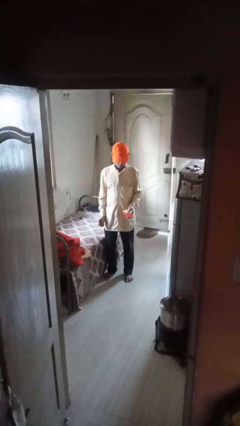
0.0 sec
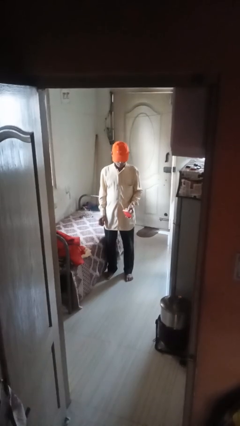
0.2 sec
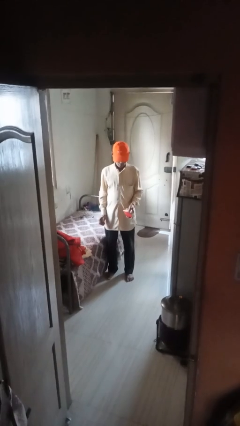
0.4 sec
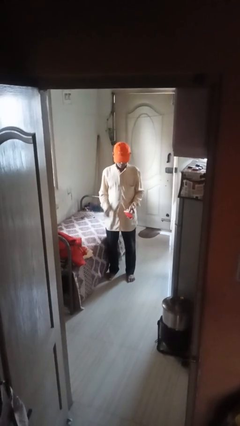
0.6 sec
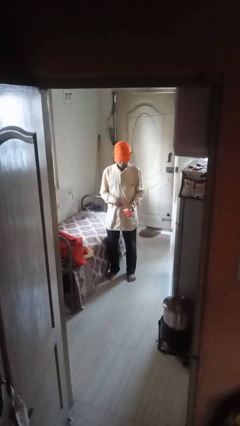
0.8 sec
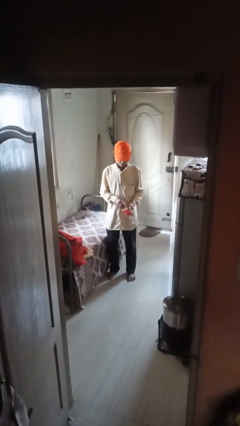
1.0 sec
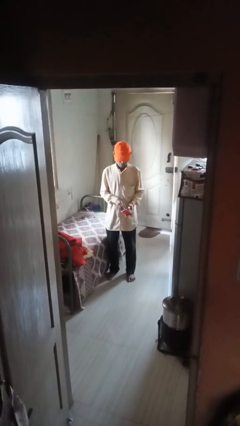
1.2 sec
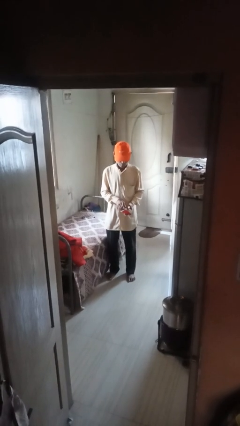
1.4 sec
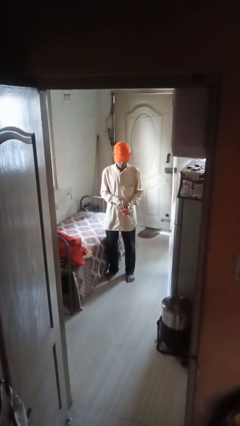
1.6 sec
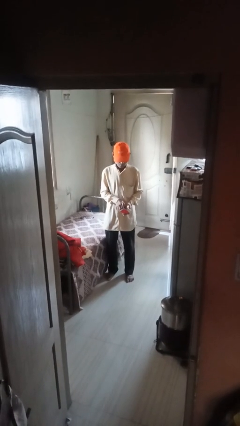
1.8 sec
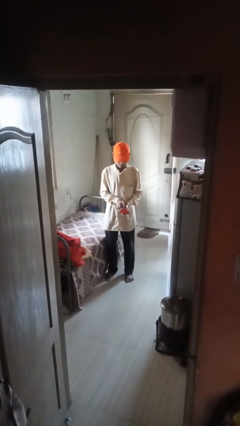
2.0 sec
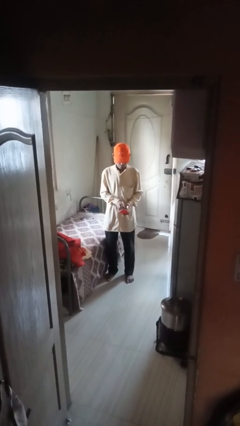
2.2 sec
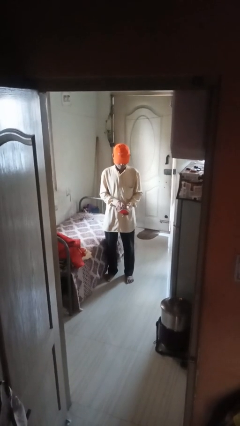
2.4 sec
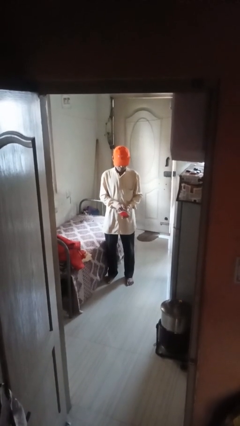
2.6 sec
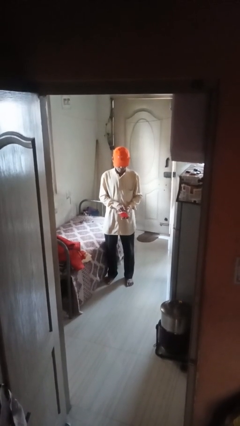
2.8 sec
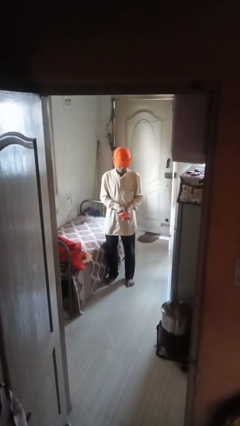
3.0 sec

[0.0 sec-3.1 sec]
person searches in purse

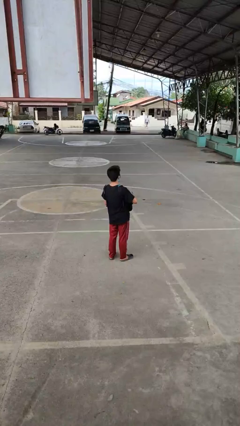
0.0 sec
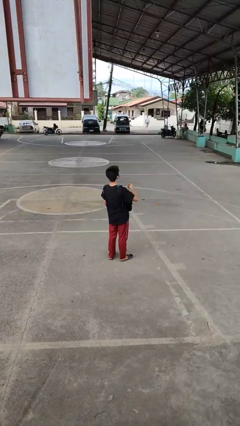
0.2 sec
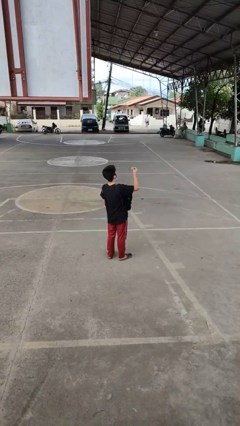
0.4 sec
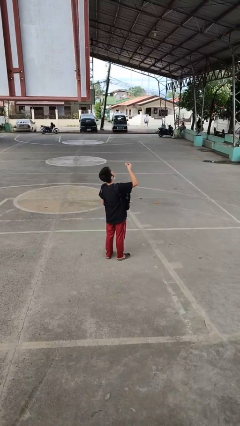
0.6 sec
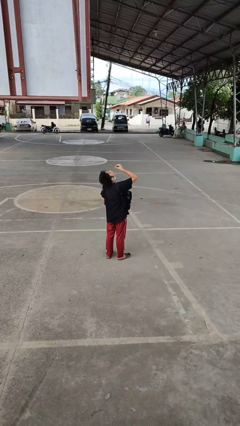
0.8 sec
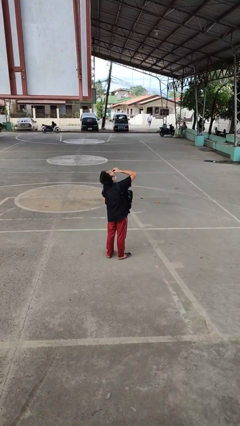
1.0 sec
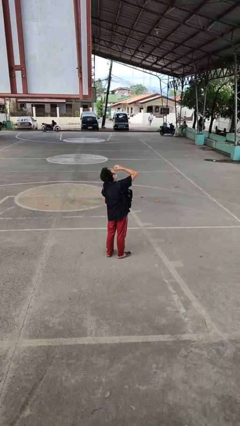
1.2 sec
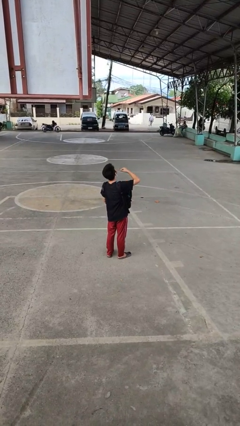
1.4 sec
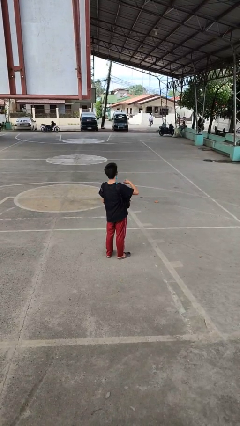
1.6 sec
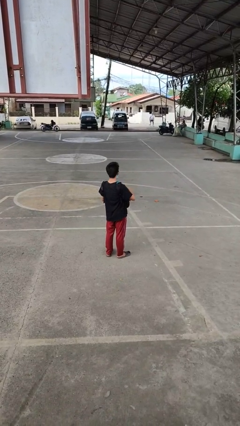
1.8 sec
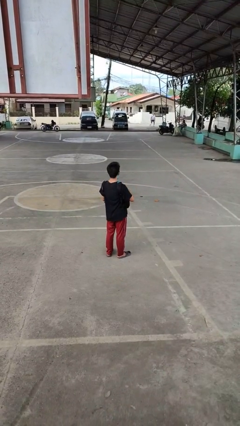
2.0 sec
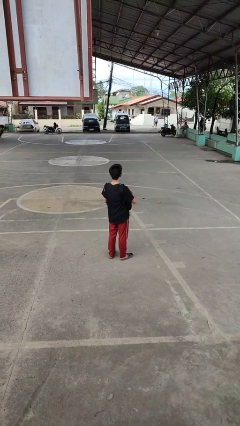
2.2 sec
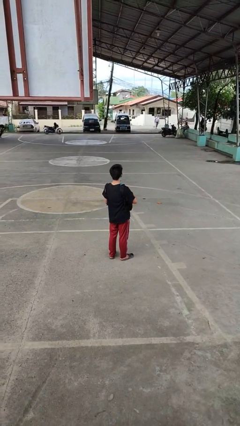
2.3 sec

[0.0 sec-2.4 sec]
person eats snack from bag

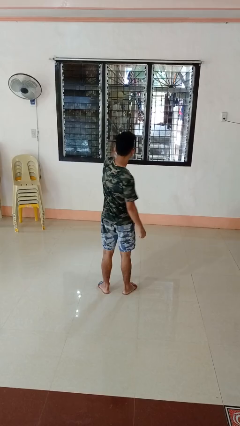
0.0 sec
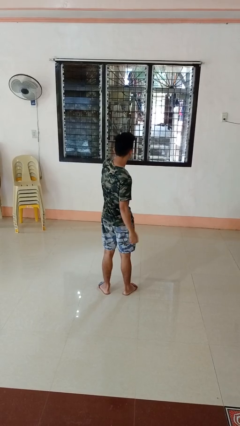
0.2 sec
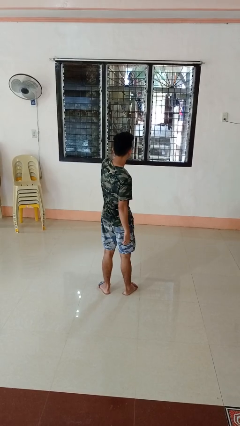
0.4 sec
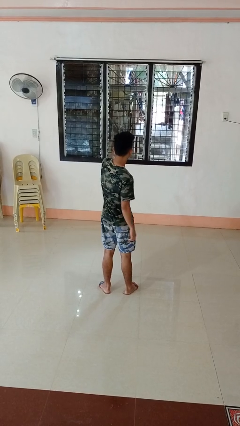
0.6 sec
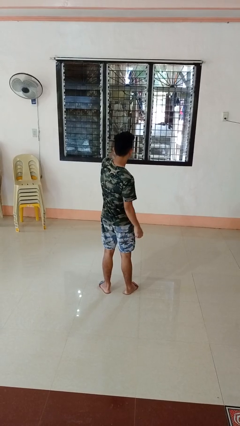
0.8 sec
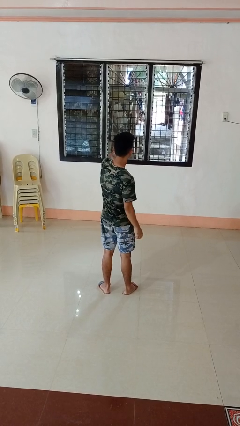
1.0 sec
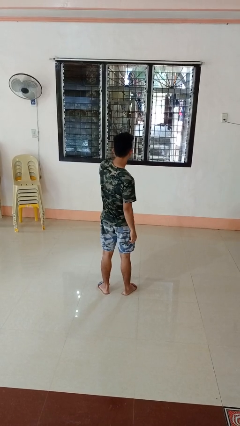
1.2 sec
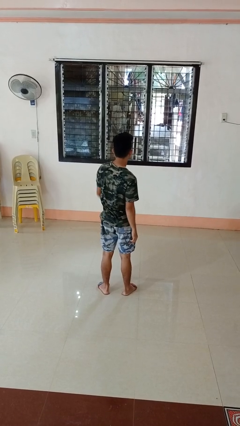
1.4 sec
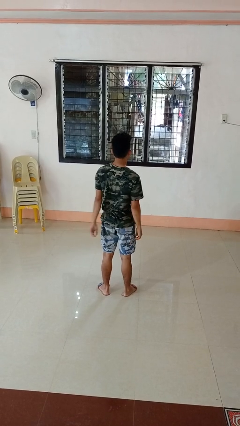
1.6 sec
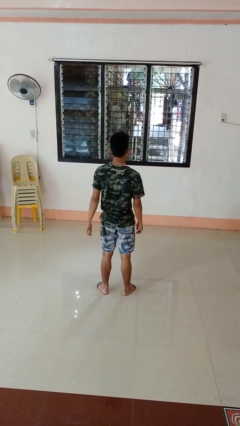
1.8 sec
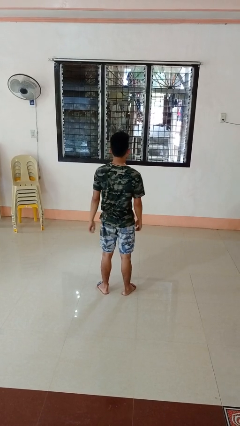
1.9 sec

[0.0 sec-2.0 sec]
person punches

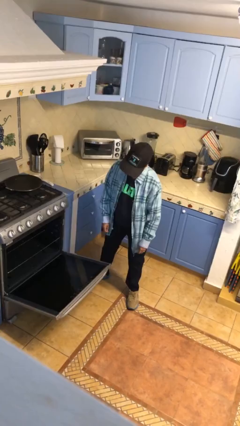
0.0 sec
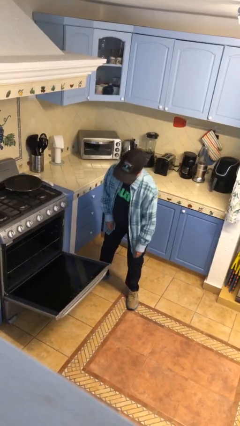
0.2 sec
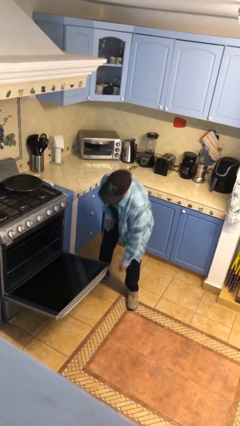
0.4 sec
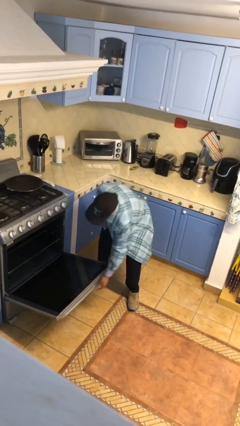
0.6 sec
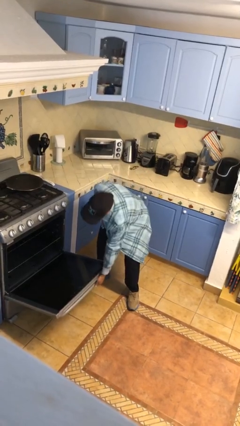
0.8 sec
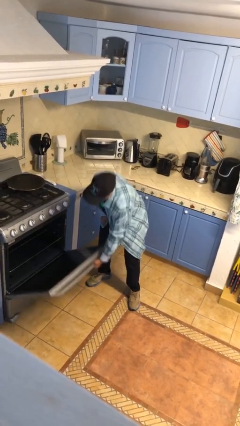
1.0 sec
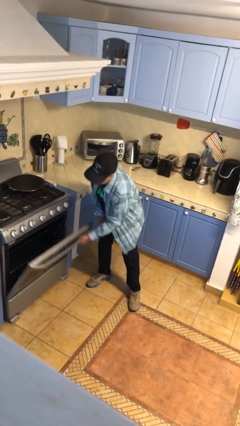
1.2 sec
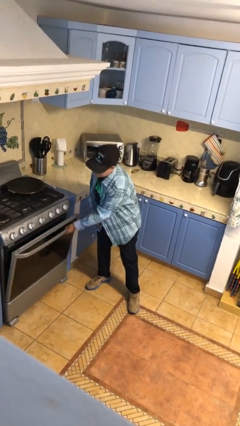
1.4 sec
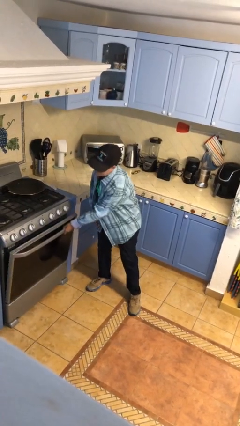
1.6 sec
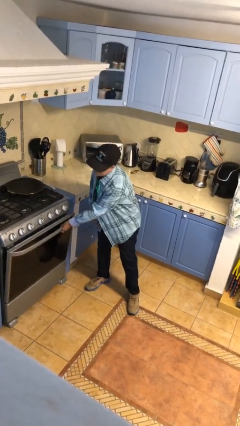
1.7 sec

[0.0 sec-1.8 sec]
person closes oven door

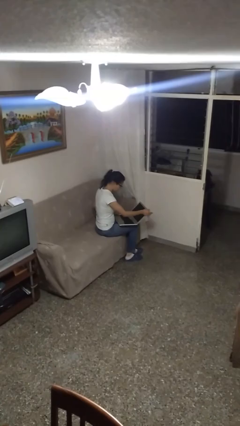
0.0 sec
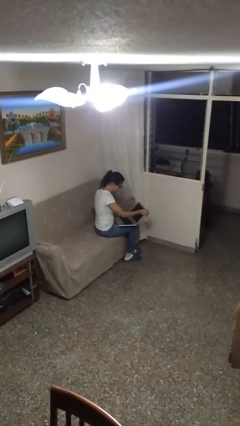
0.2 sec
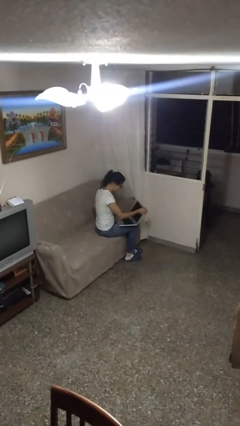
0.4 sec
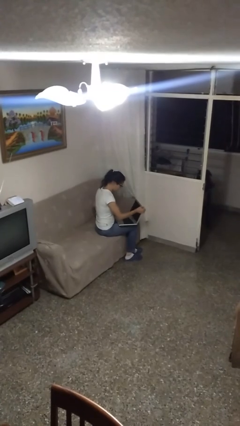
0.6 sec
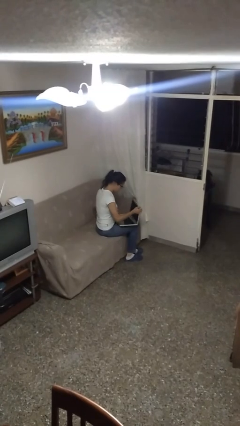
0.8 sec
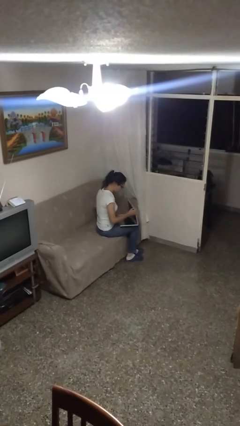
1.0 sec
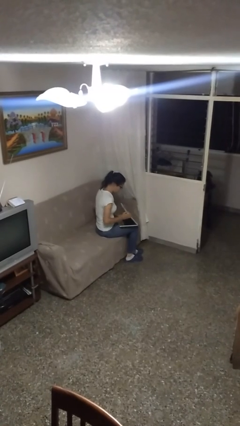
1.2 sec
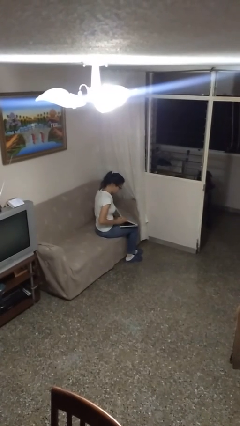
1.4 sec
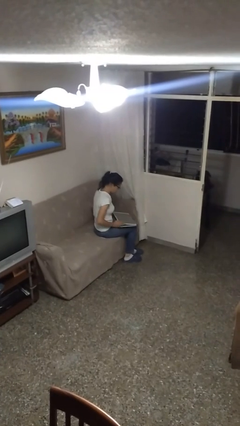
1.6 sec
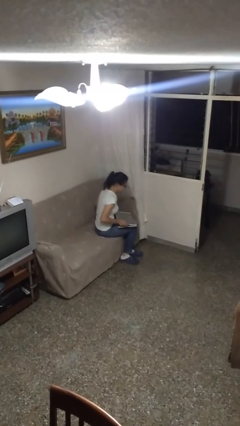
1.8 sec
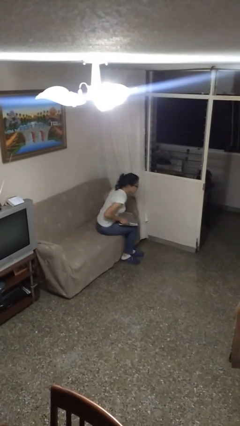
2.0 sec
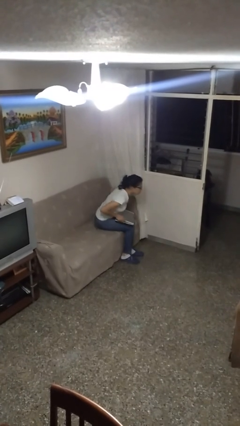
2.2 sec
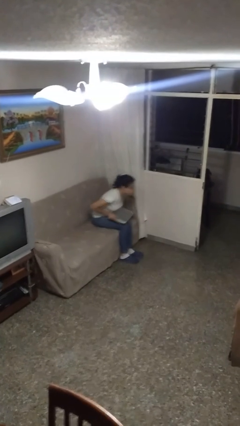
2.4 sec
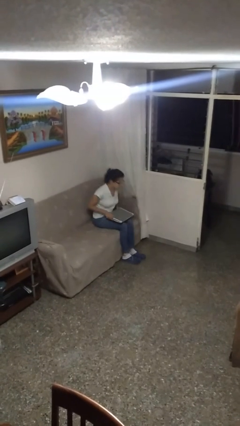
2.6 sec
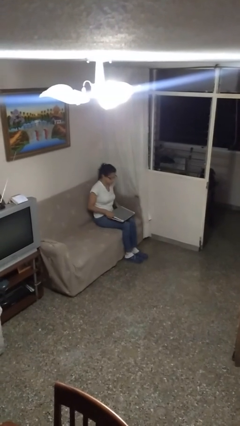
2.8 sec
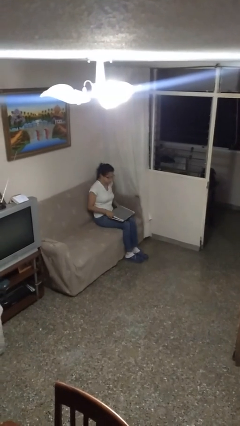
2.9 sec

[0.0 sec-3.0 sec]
person closes laptop

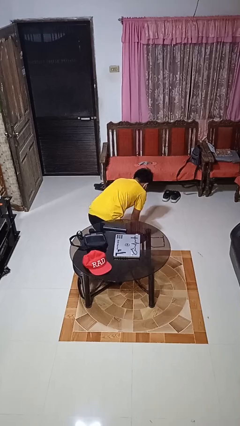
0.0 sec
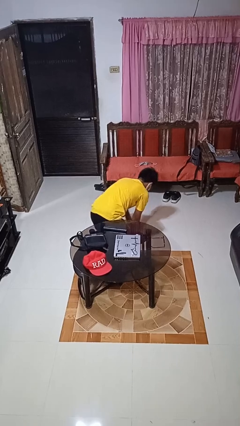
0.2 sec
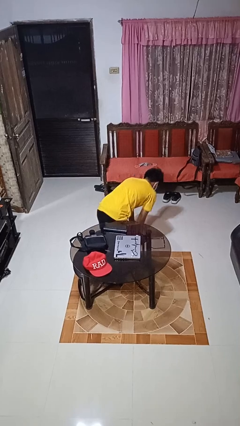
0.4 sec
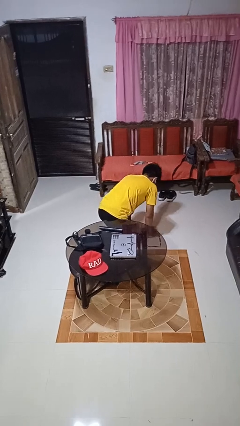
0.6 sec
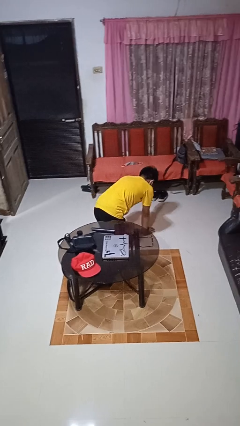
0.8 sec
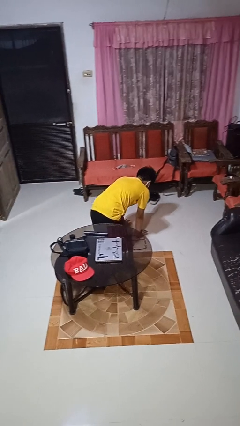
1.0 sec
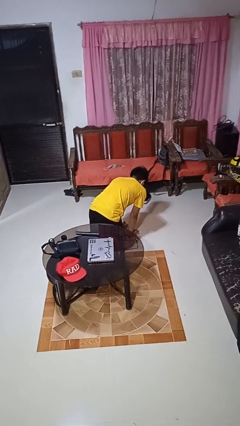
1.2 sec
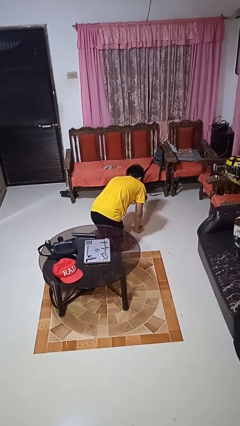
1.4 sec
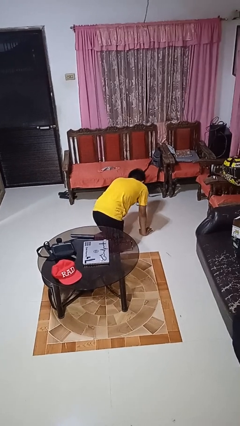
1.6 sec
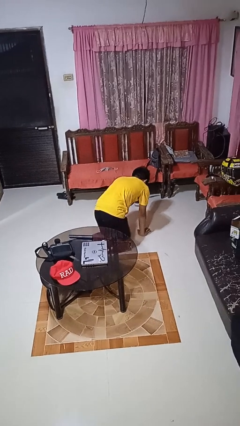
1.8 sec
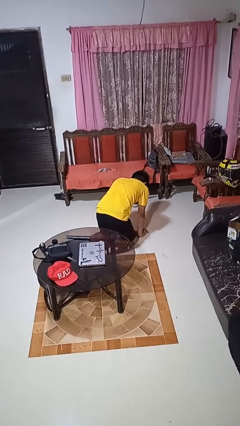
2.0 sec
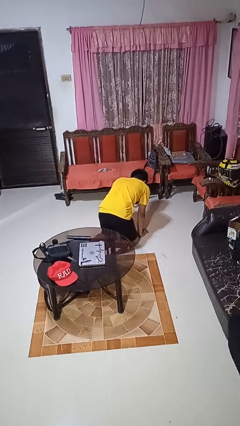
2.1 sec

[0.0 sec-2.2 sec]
person crawls

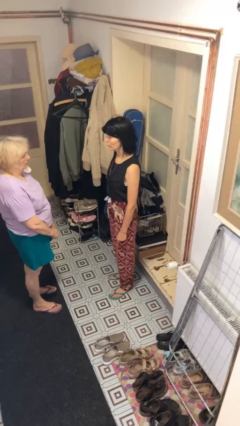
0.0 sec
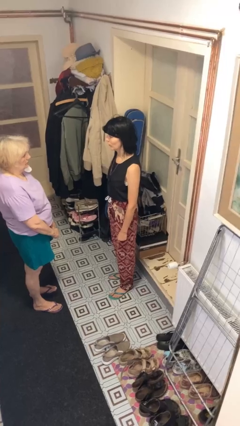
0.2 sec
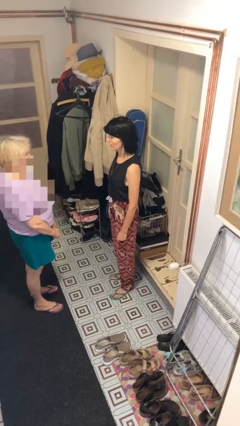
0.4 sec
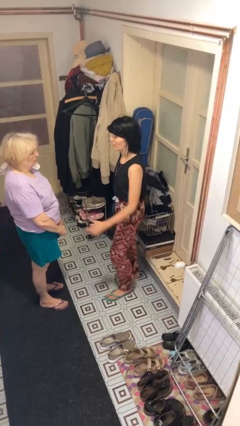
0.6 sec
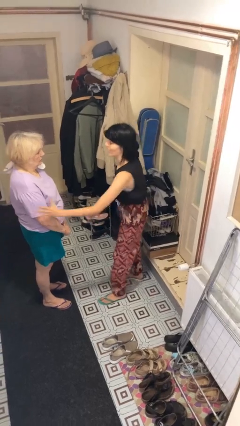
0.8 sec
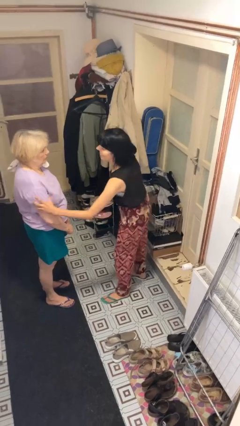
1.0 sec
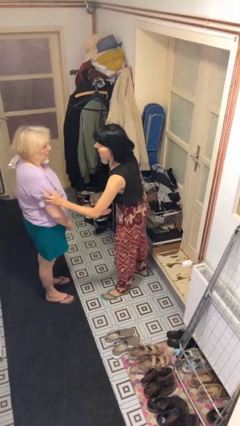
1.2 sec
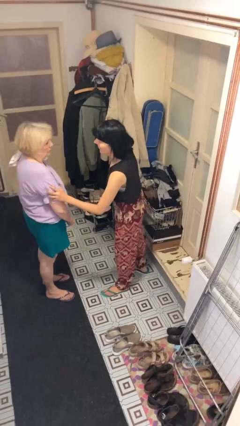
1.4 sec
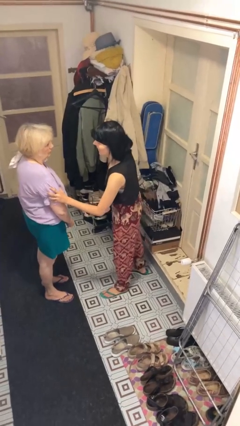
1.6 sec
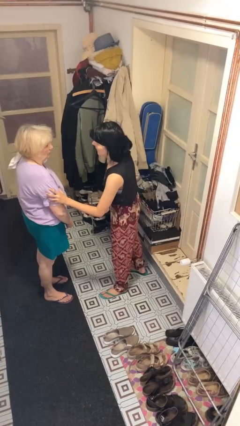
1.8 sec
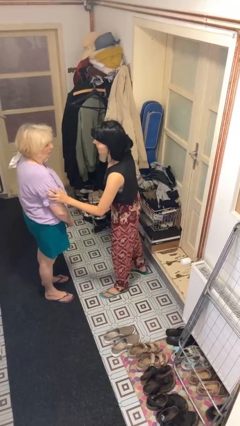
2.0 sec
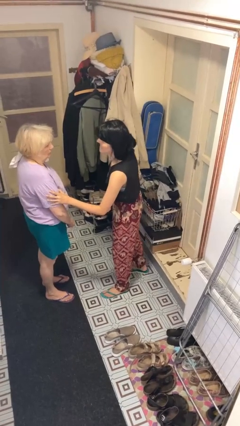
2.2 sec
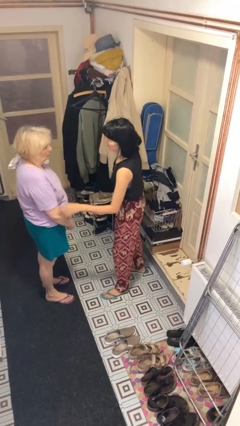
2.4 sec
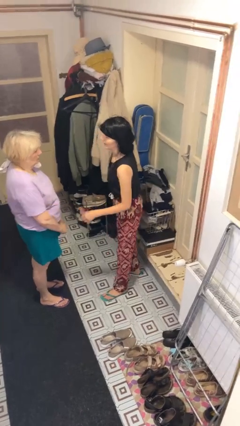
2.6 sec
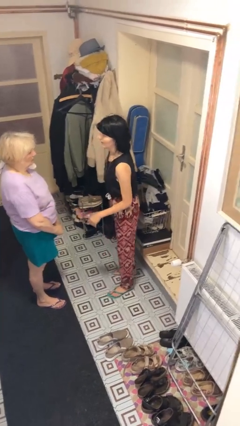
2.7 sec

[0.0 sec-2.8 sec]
person grabs person by bicep
